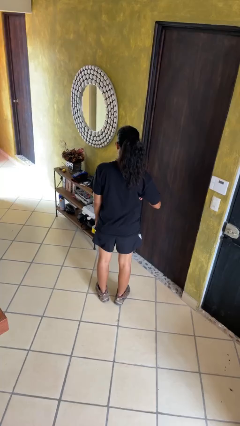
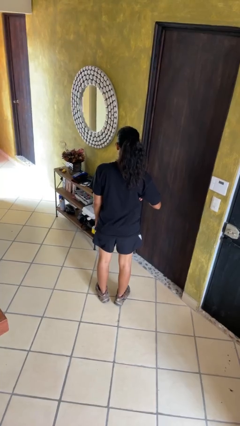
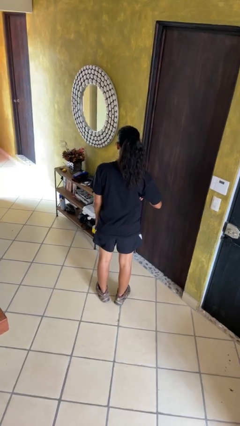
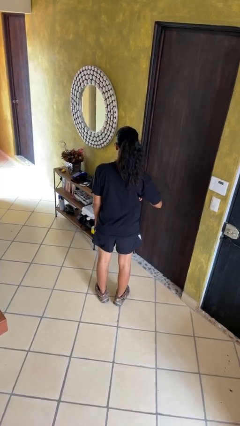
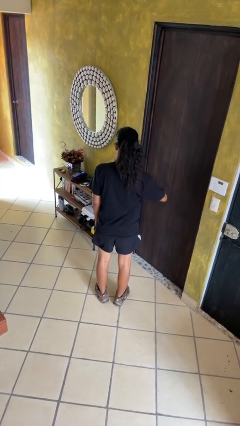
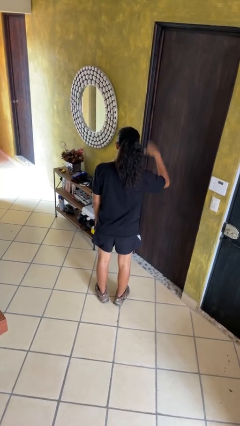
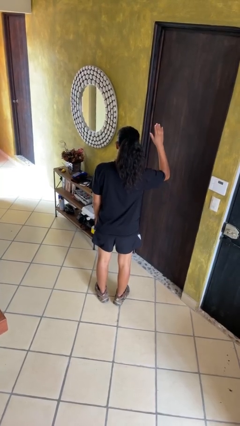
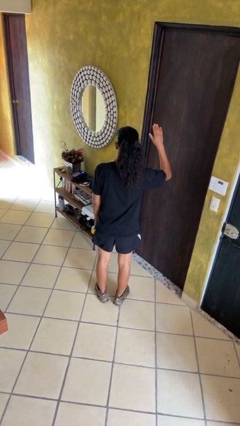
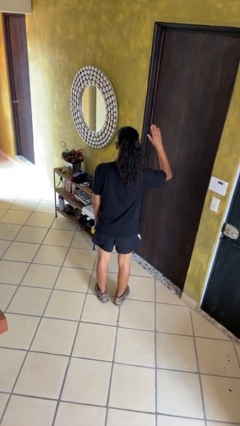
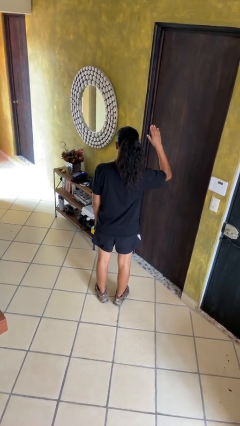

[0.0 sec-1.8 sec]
person gestures swipe up

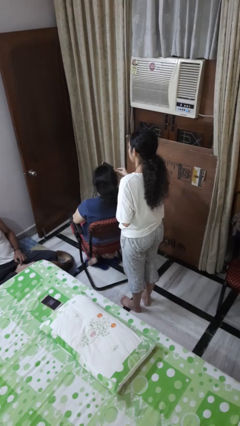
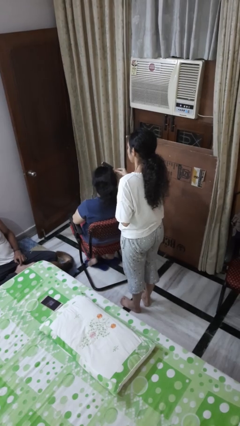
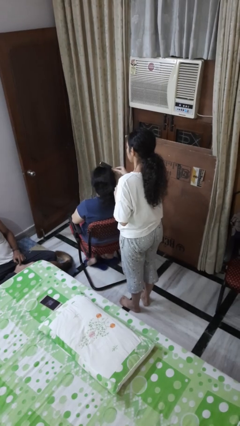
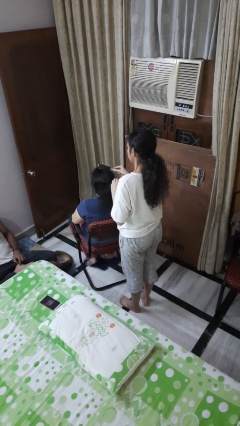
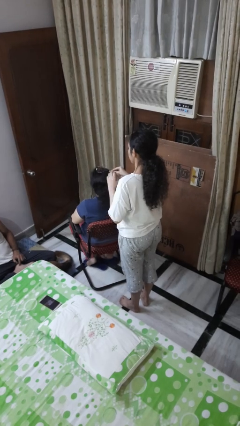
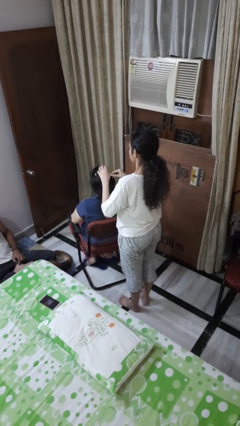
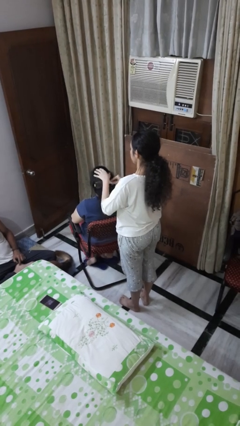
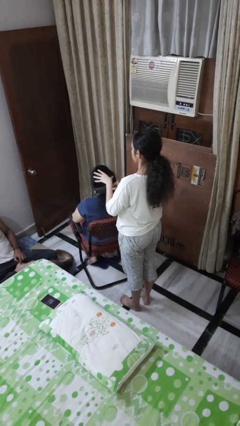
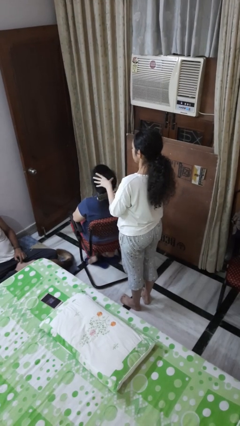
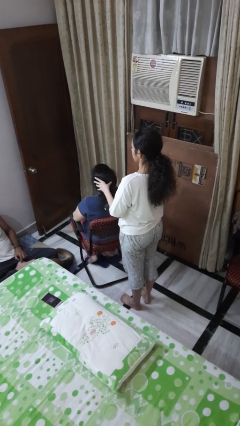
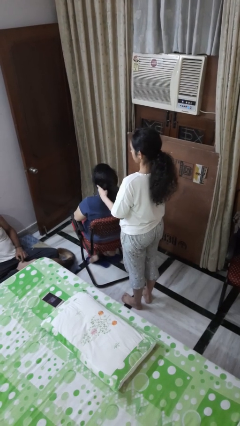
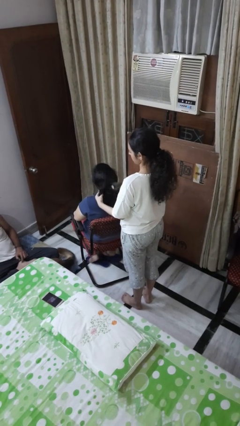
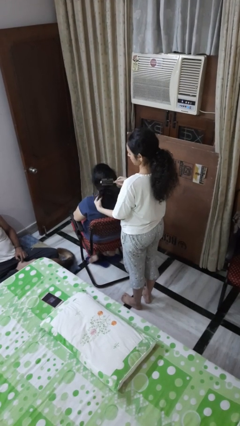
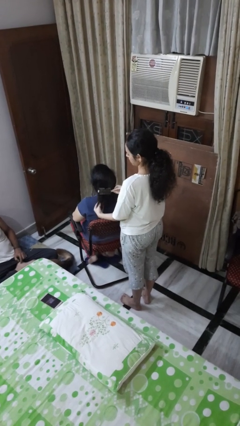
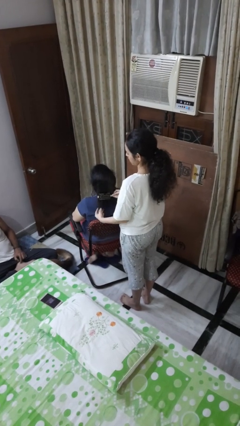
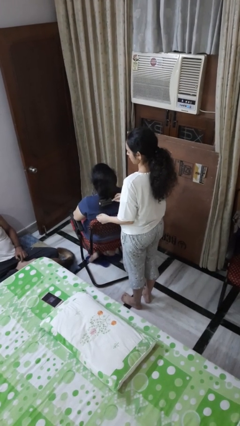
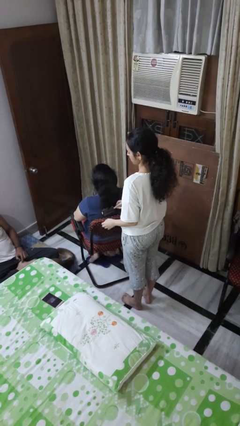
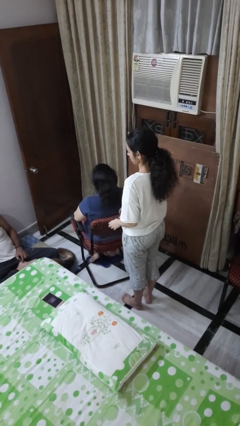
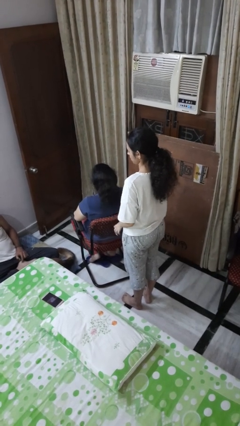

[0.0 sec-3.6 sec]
person brushes hair of person

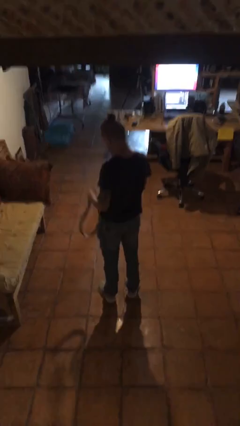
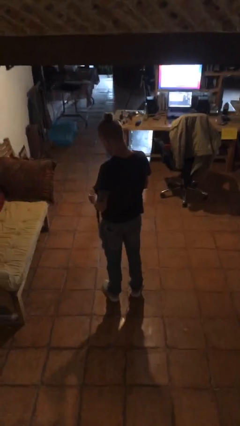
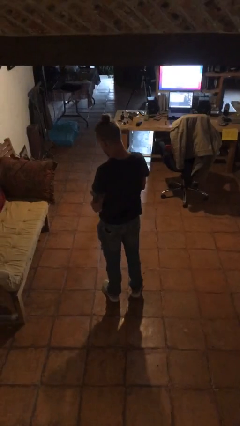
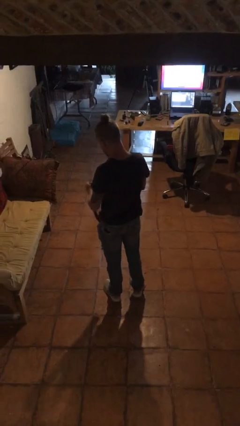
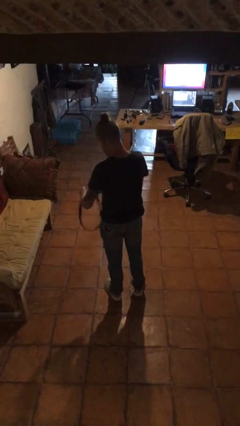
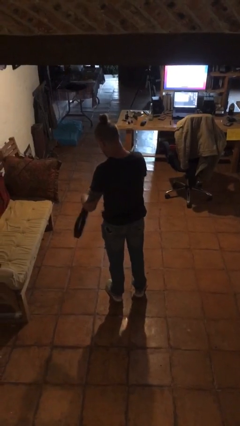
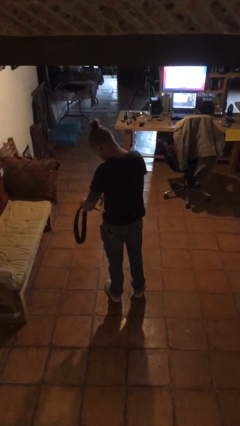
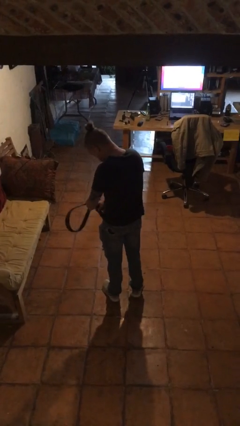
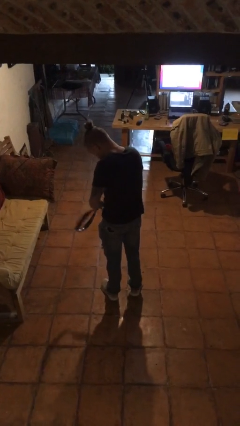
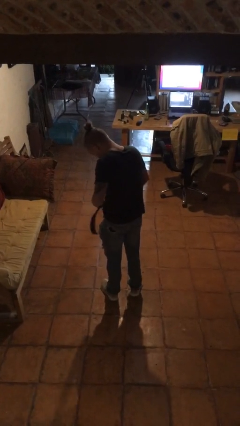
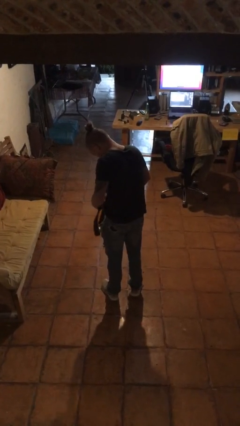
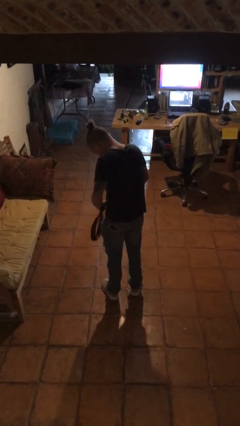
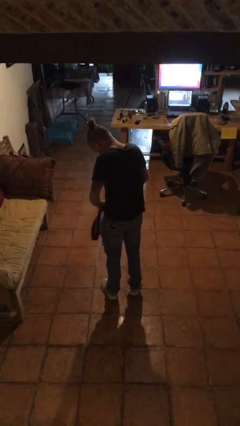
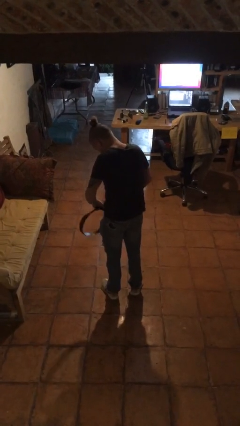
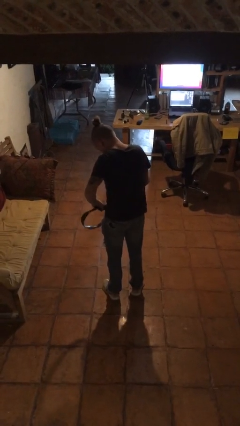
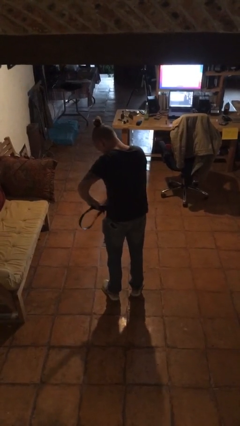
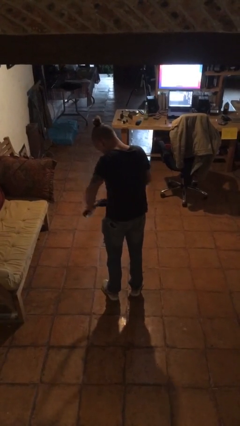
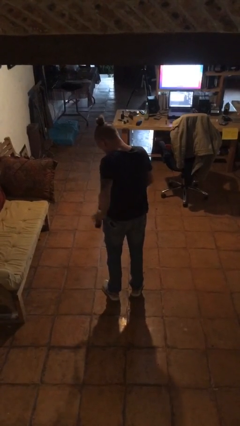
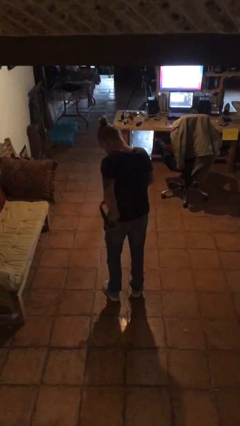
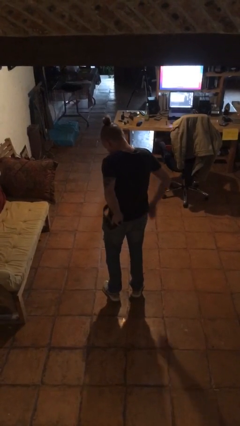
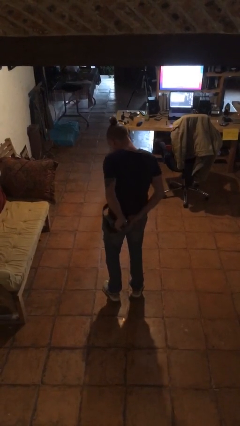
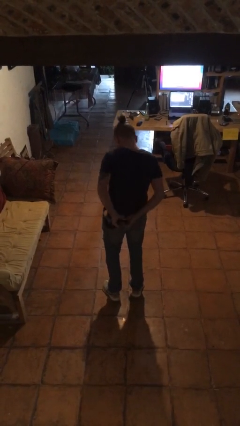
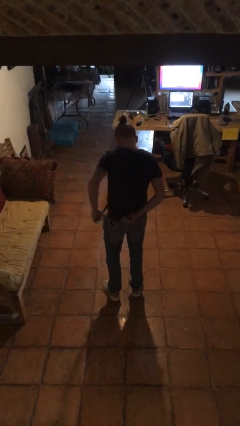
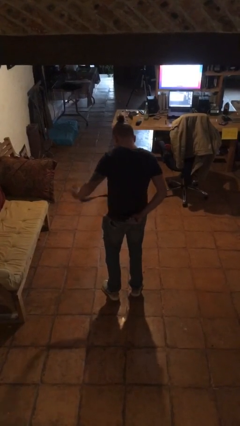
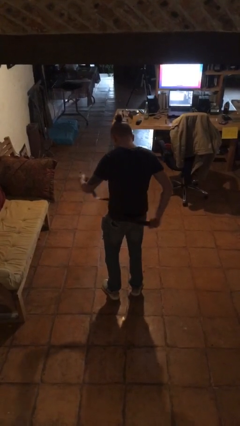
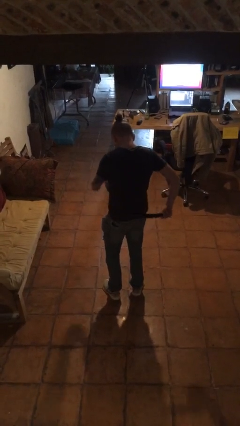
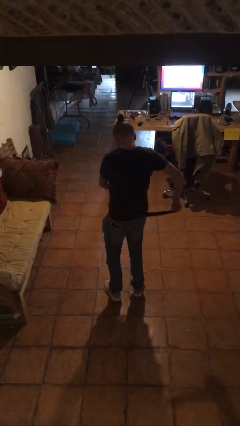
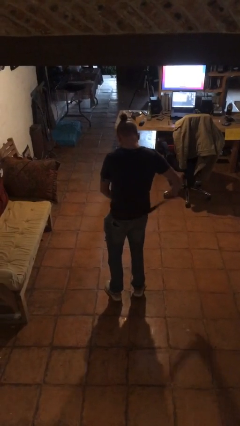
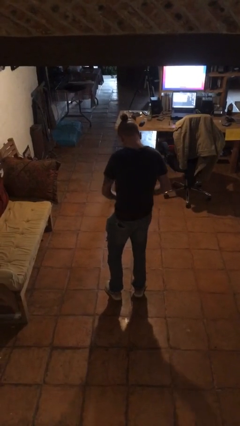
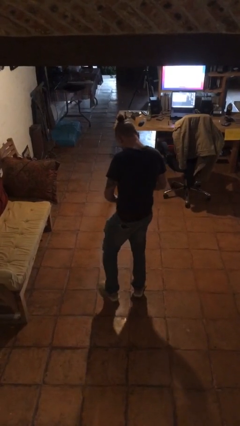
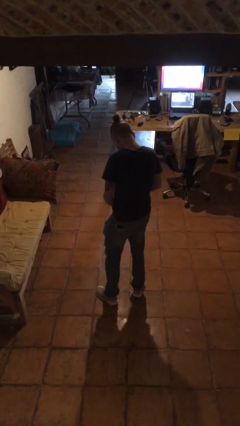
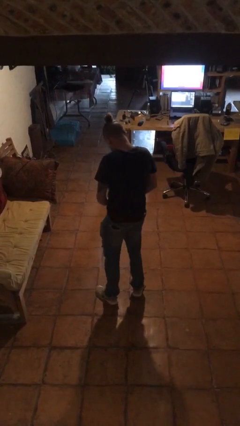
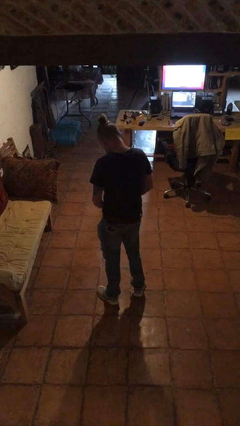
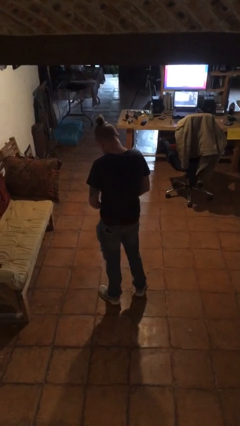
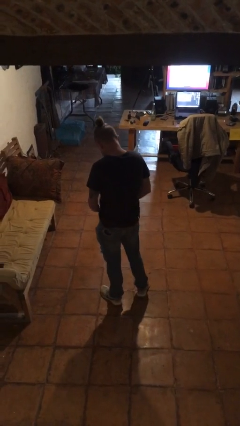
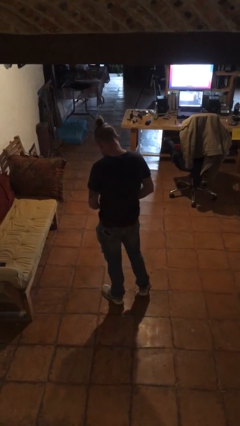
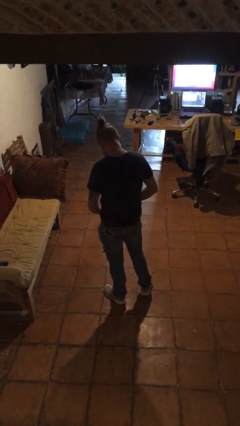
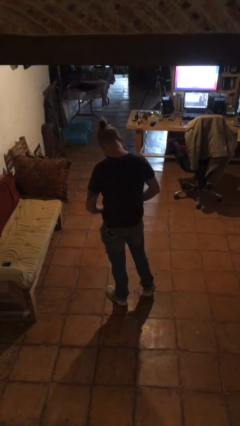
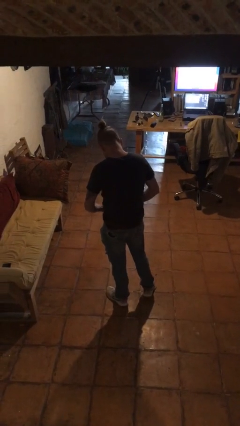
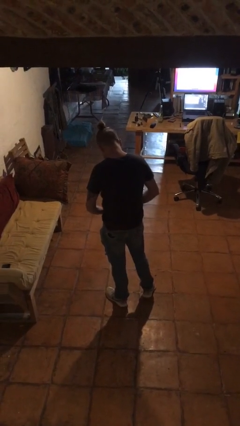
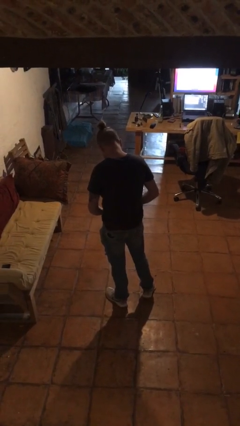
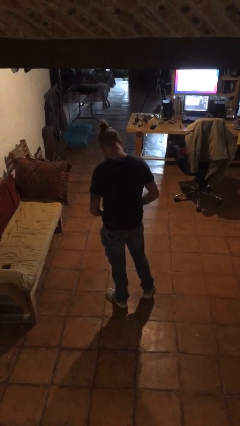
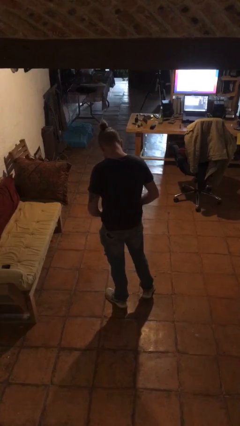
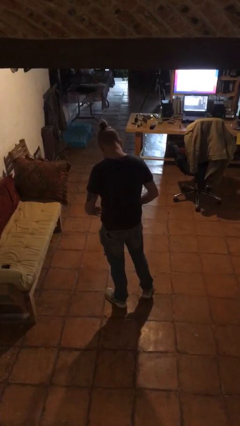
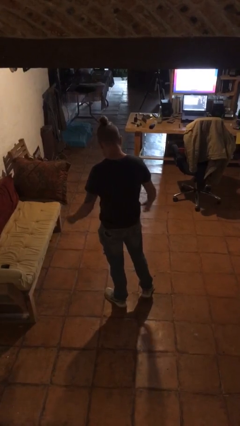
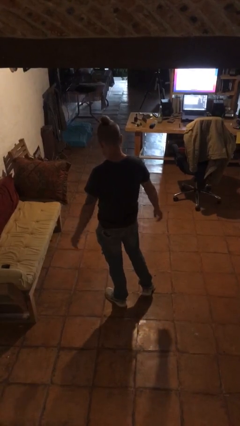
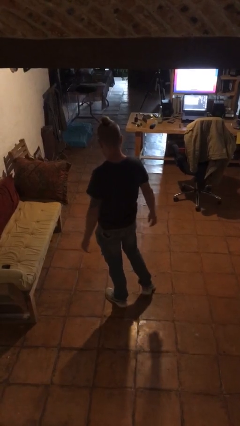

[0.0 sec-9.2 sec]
person puts on belt

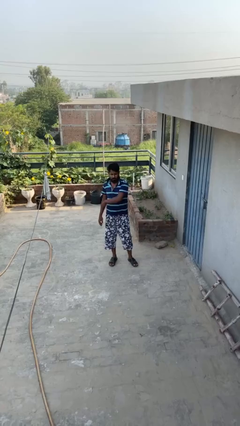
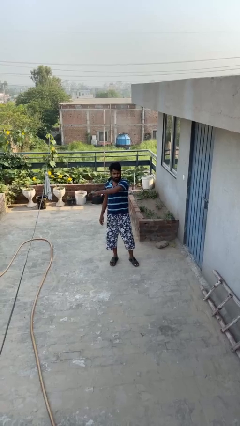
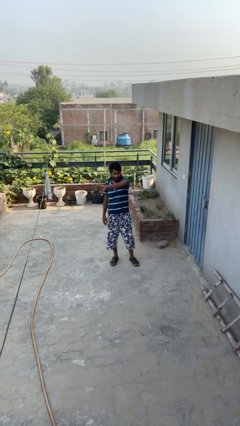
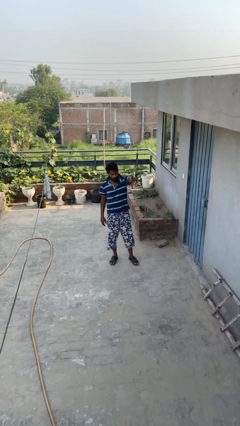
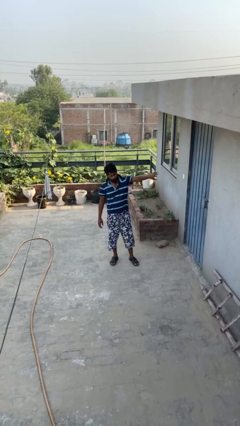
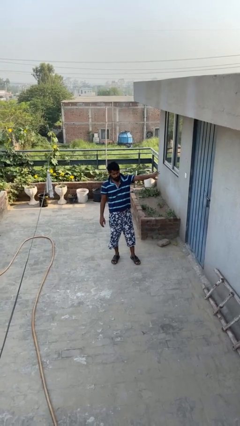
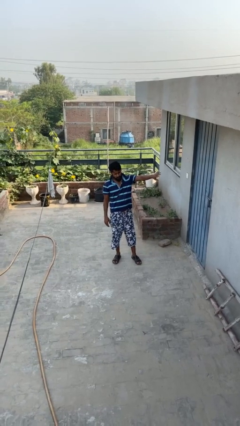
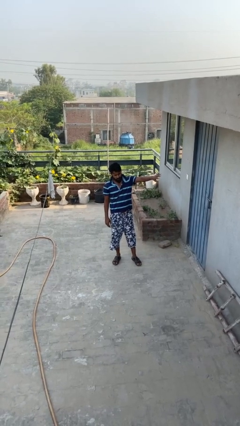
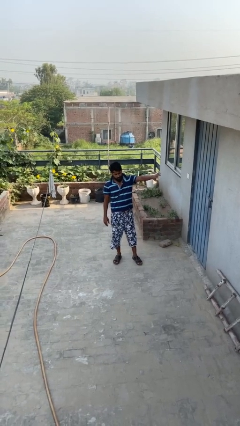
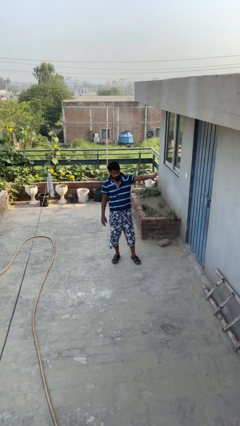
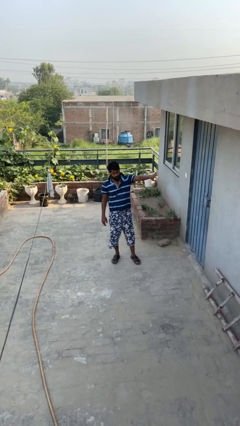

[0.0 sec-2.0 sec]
person gestures swipe left

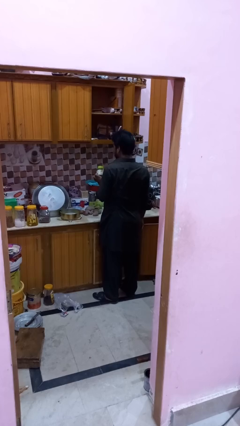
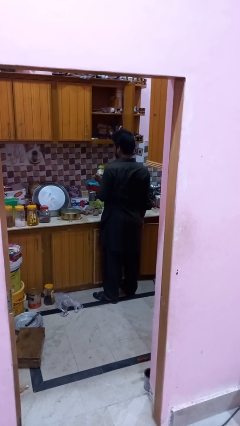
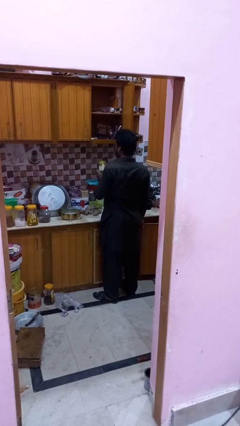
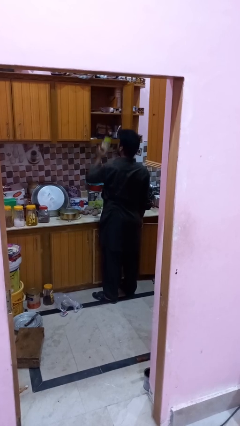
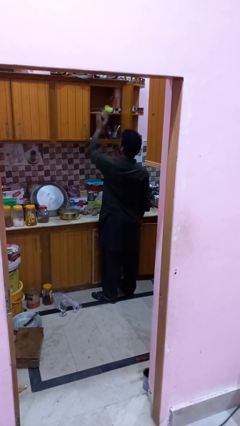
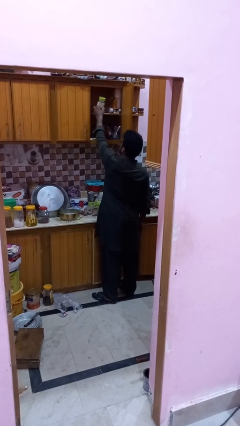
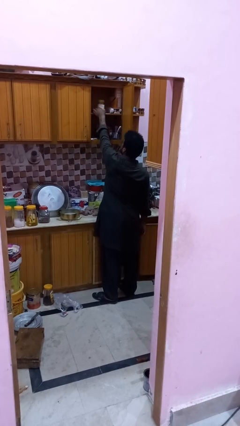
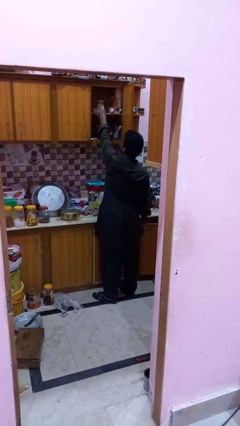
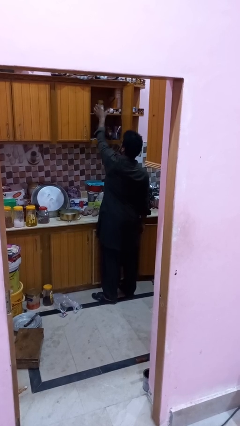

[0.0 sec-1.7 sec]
person puts object in cabinet
